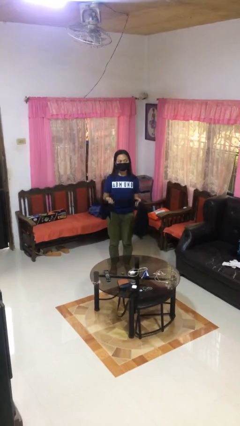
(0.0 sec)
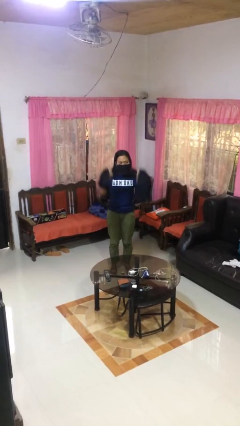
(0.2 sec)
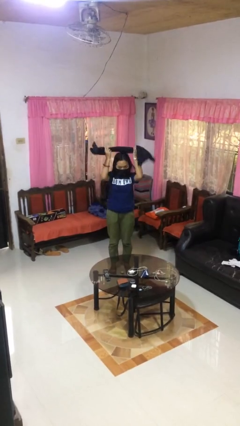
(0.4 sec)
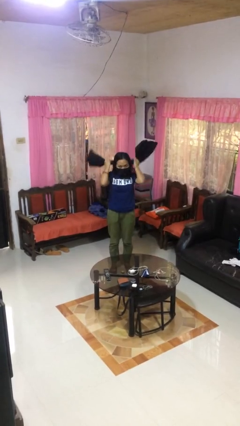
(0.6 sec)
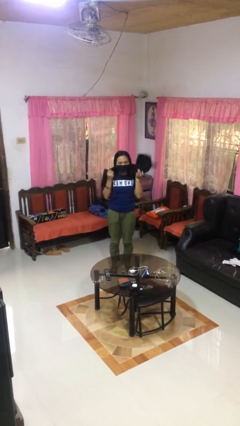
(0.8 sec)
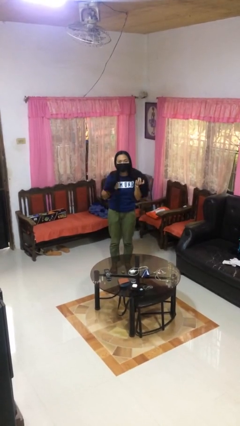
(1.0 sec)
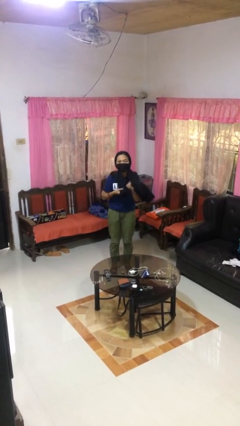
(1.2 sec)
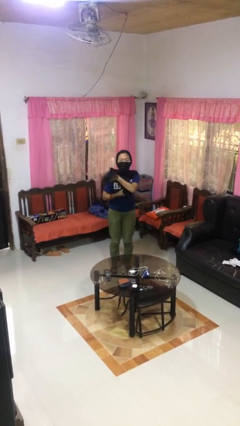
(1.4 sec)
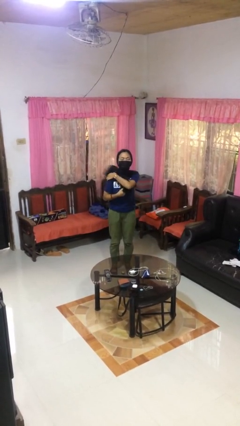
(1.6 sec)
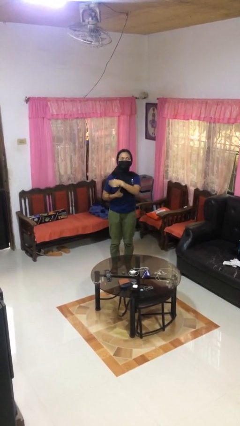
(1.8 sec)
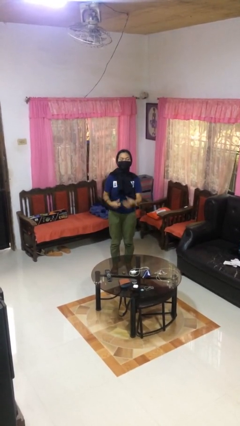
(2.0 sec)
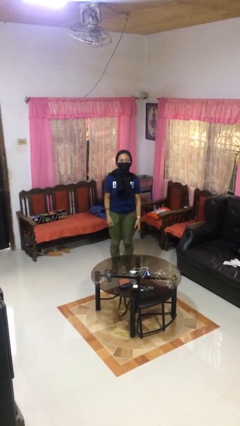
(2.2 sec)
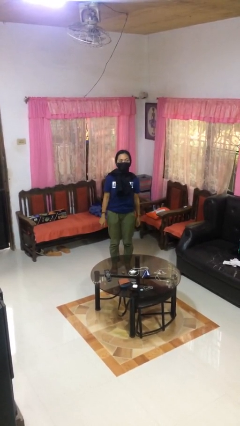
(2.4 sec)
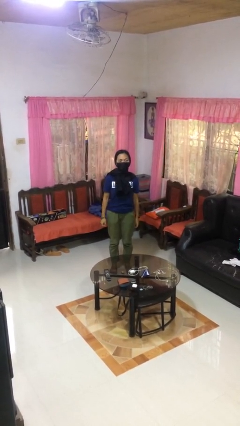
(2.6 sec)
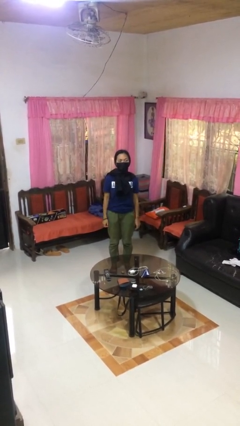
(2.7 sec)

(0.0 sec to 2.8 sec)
person puts on scarf

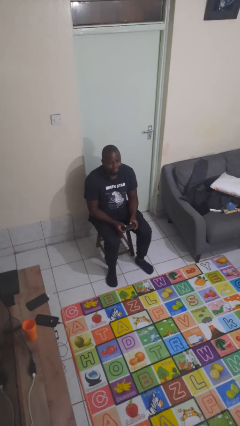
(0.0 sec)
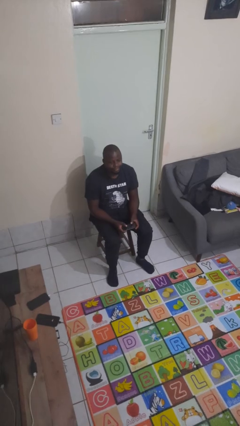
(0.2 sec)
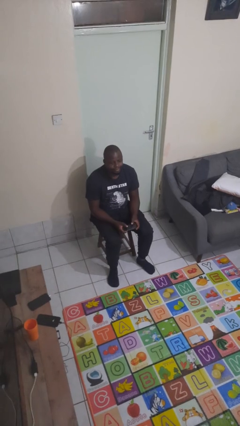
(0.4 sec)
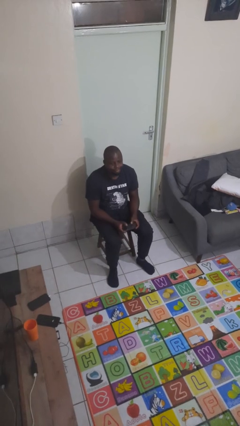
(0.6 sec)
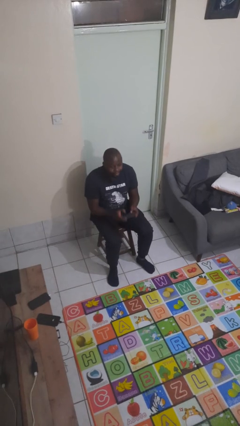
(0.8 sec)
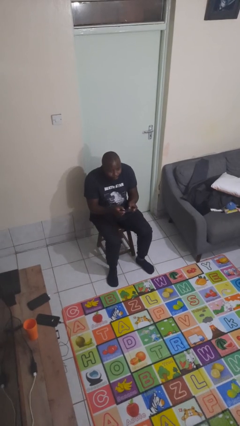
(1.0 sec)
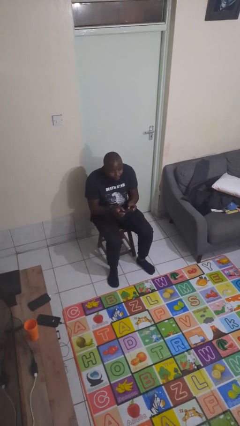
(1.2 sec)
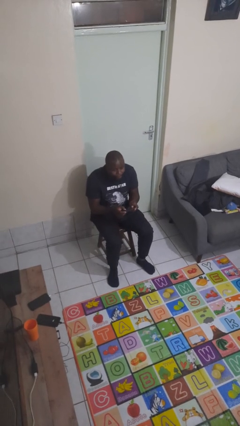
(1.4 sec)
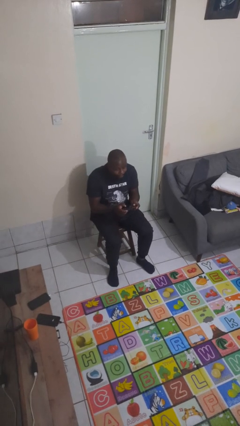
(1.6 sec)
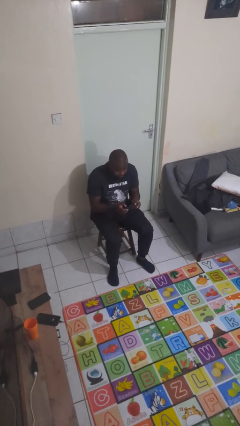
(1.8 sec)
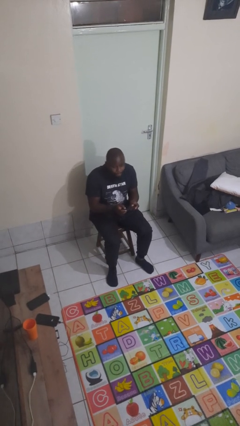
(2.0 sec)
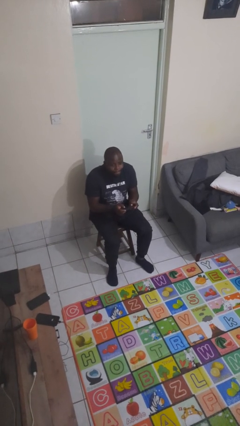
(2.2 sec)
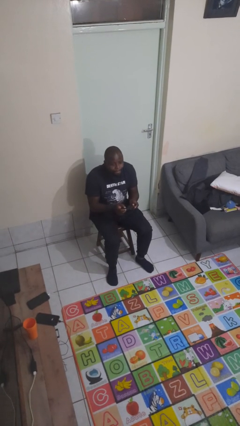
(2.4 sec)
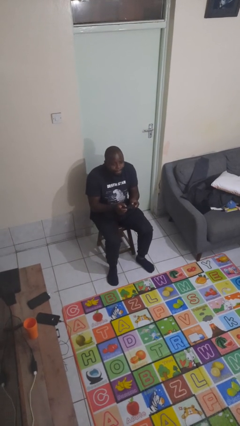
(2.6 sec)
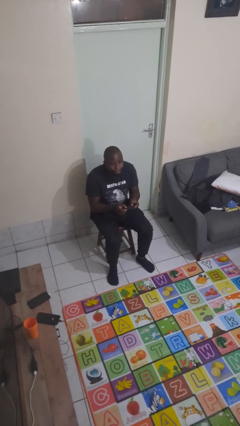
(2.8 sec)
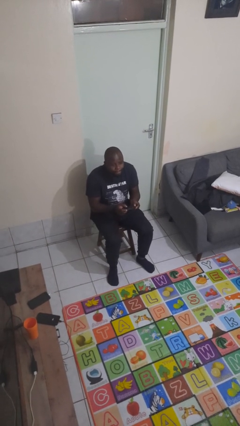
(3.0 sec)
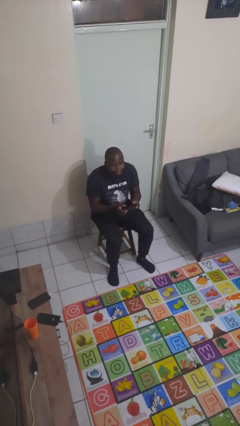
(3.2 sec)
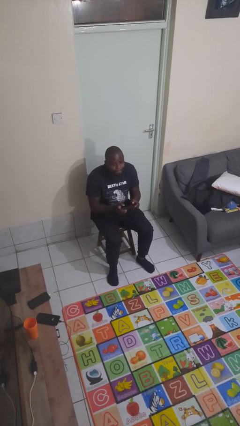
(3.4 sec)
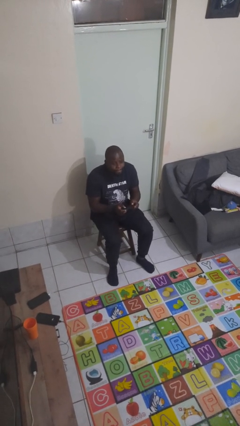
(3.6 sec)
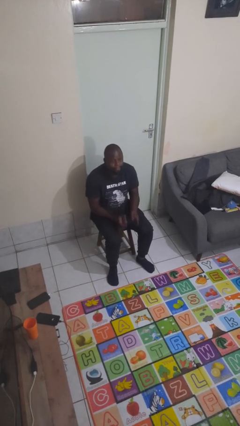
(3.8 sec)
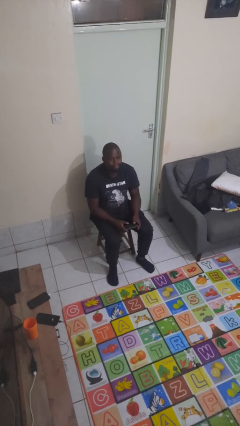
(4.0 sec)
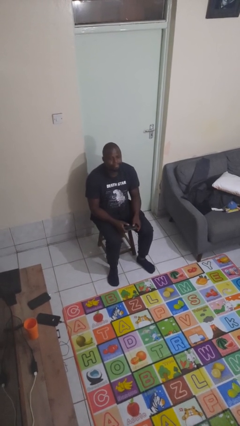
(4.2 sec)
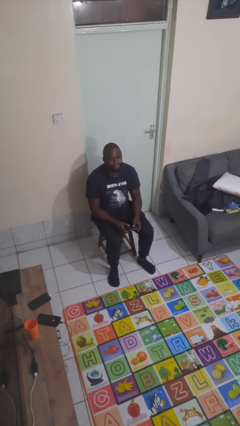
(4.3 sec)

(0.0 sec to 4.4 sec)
person interacts with handheld game

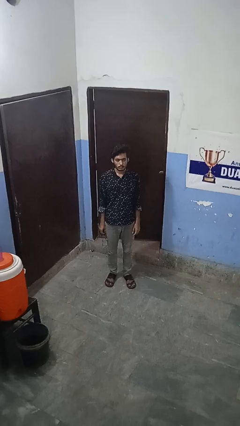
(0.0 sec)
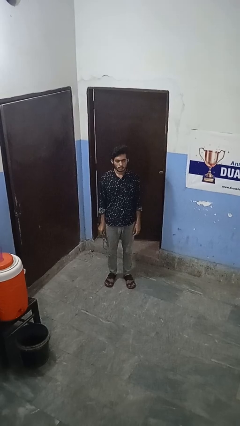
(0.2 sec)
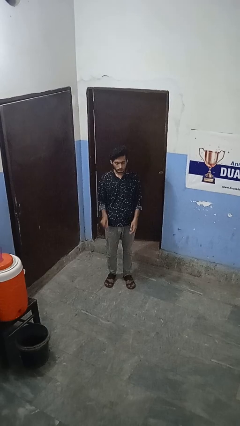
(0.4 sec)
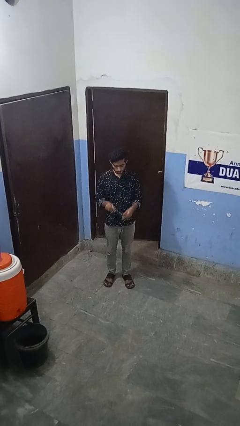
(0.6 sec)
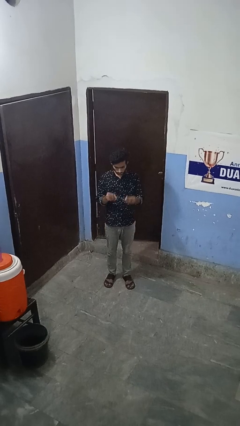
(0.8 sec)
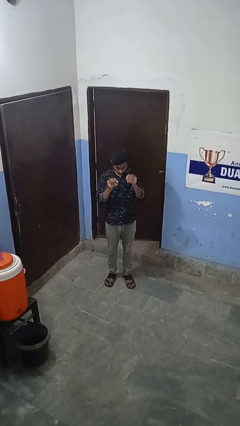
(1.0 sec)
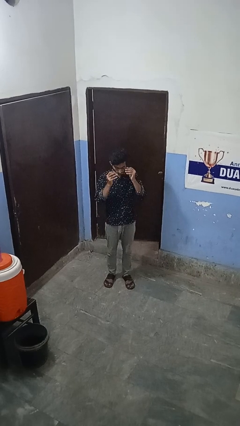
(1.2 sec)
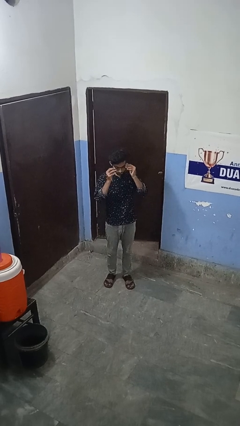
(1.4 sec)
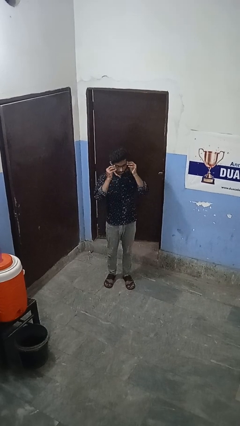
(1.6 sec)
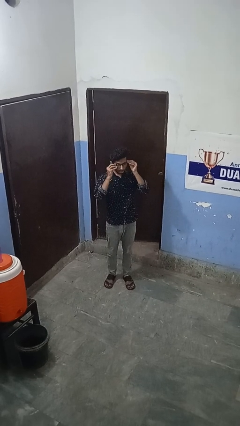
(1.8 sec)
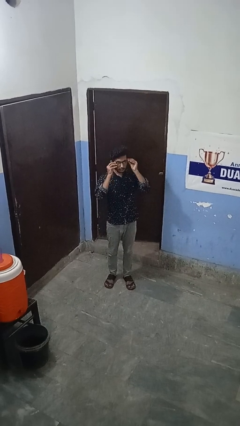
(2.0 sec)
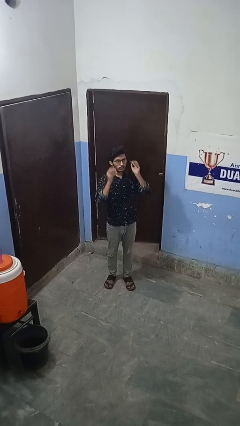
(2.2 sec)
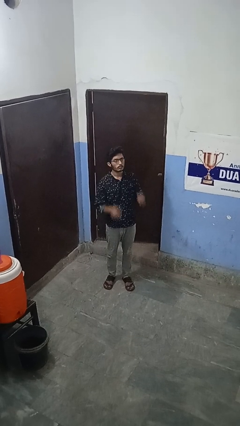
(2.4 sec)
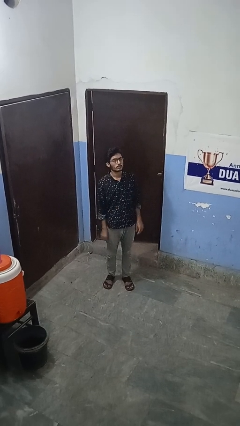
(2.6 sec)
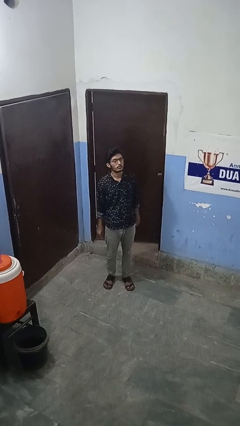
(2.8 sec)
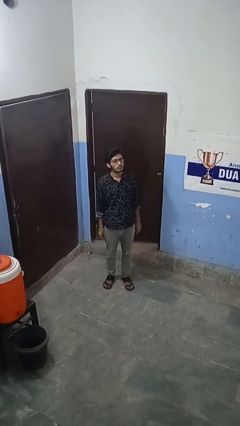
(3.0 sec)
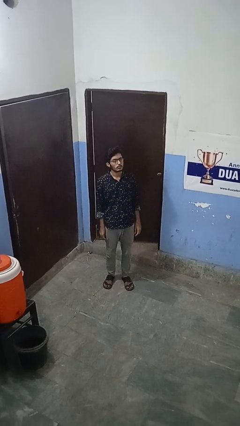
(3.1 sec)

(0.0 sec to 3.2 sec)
person puts on glasses

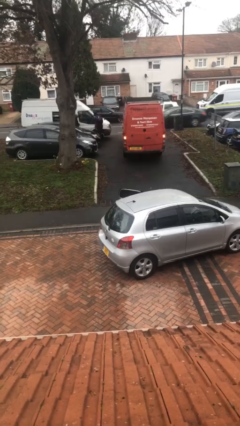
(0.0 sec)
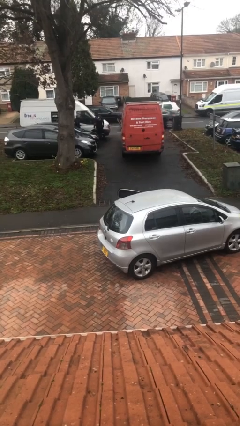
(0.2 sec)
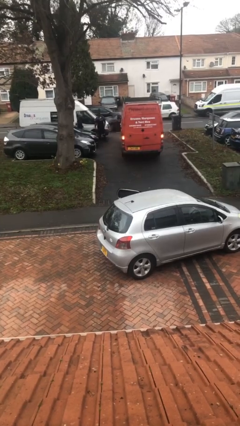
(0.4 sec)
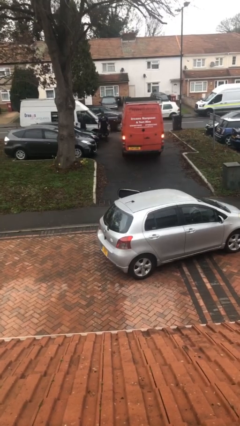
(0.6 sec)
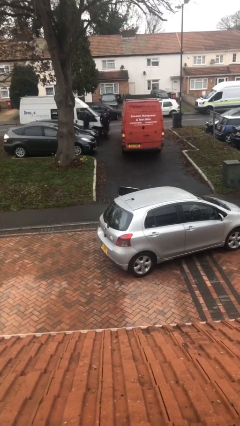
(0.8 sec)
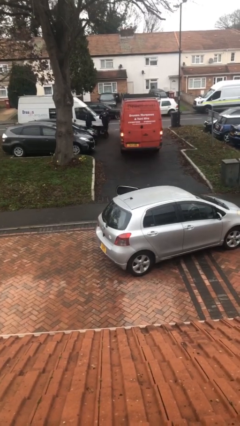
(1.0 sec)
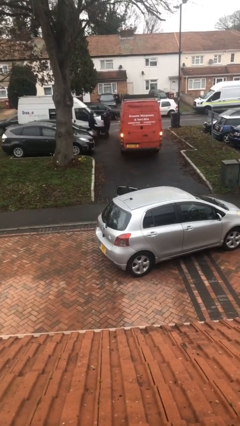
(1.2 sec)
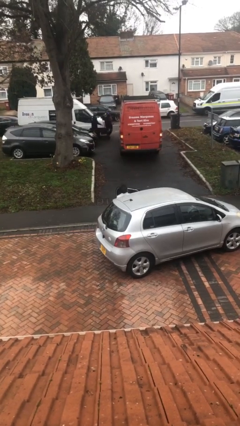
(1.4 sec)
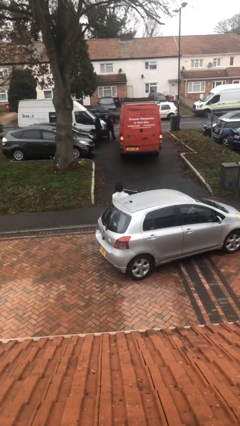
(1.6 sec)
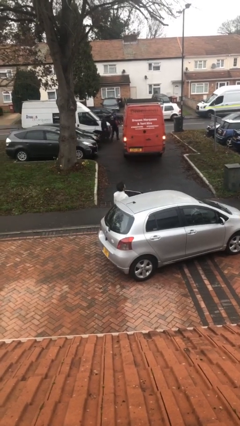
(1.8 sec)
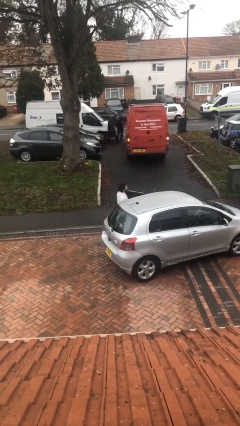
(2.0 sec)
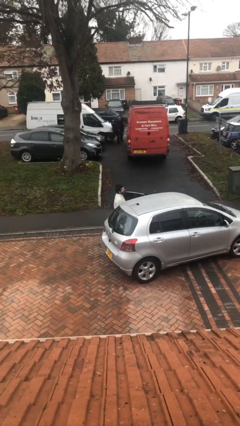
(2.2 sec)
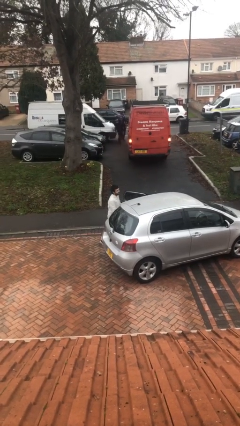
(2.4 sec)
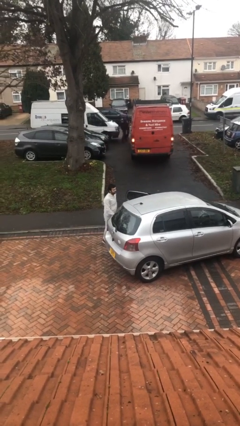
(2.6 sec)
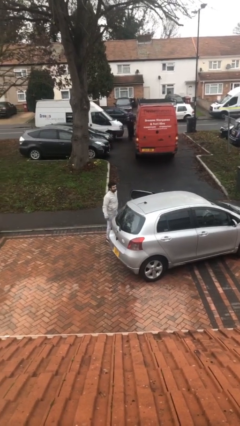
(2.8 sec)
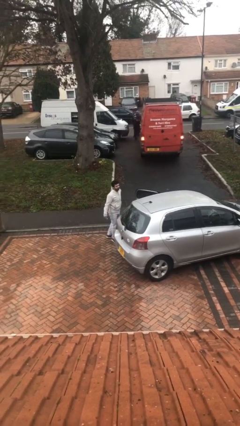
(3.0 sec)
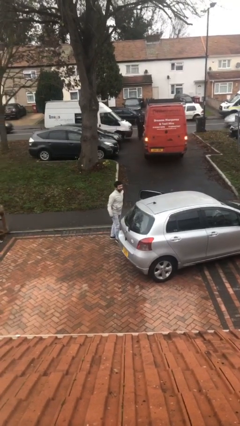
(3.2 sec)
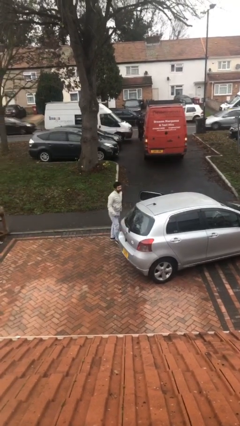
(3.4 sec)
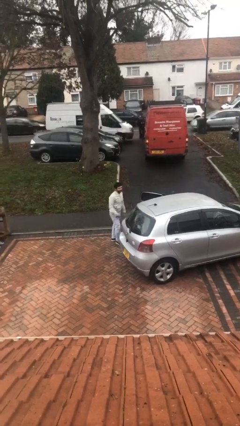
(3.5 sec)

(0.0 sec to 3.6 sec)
person exits car

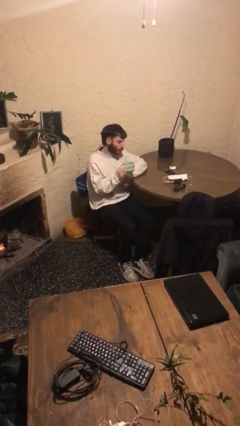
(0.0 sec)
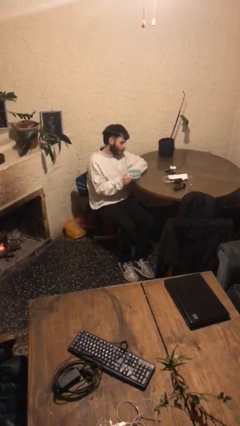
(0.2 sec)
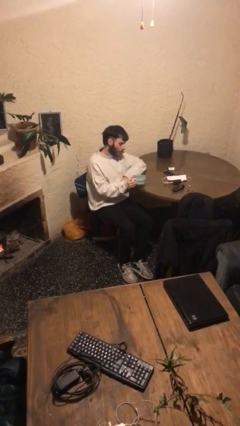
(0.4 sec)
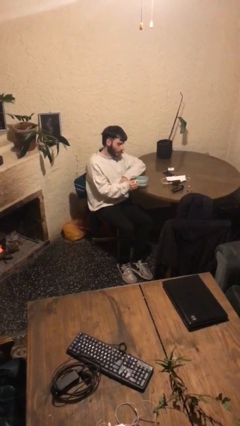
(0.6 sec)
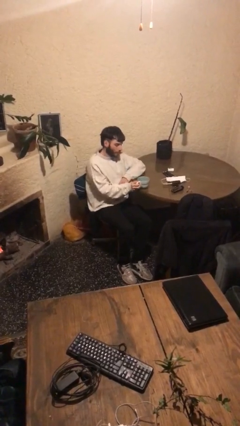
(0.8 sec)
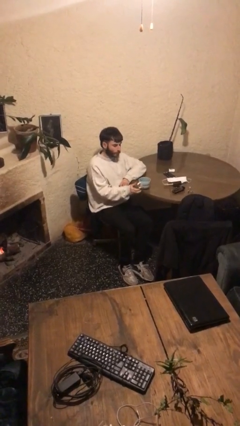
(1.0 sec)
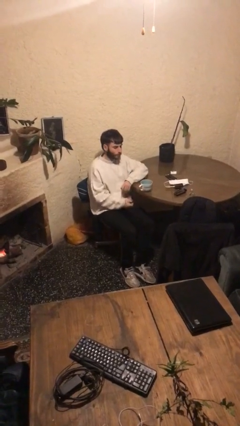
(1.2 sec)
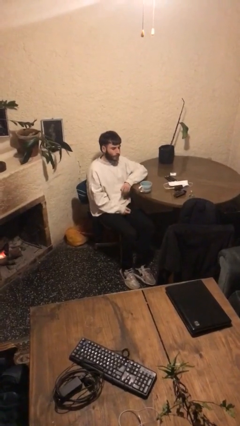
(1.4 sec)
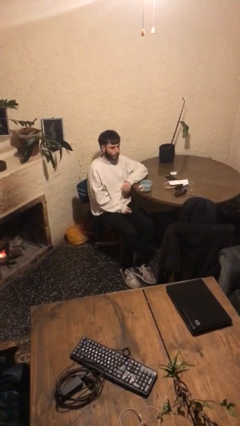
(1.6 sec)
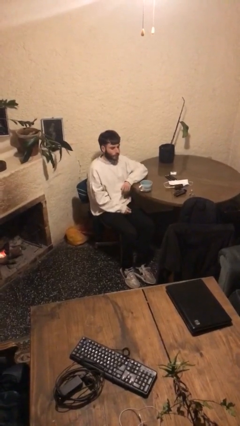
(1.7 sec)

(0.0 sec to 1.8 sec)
person puts down object on table

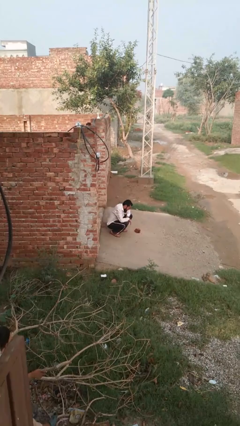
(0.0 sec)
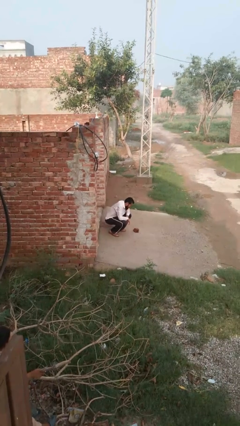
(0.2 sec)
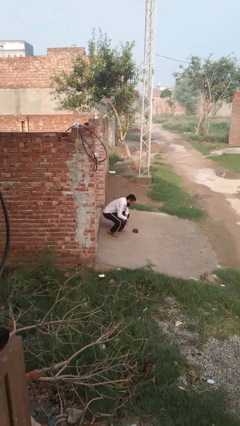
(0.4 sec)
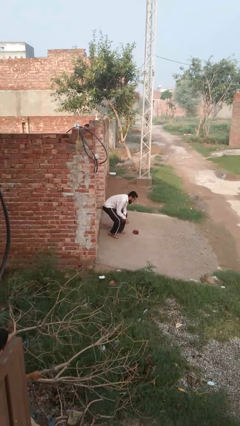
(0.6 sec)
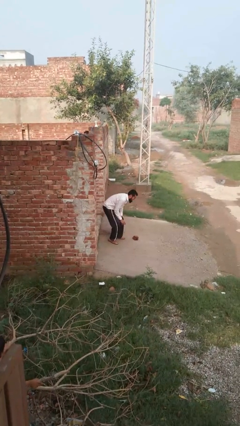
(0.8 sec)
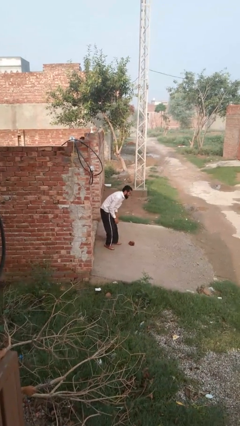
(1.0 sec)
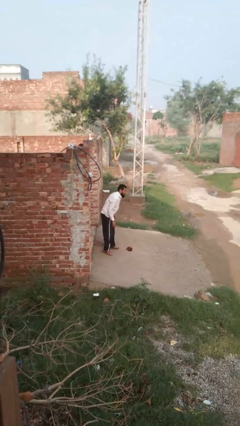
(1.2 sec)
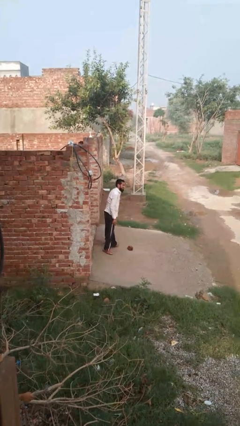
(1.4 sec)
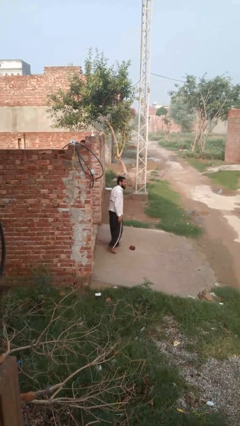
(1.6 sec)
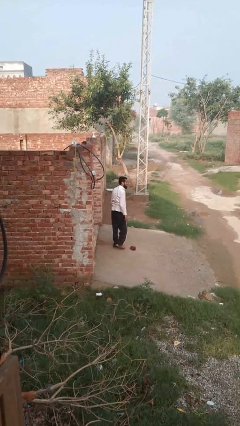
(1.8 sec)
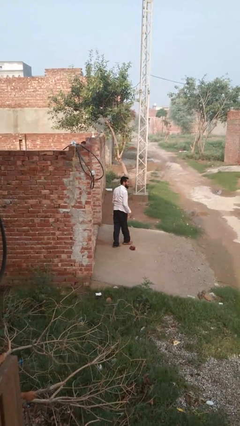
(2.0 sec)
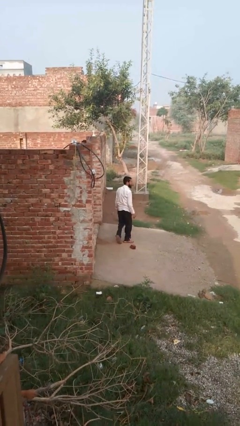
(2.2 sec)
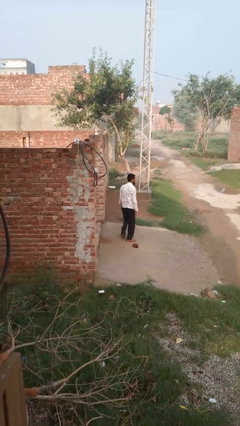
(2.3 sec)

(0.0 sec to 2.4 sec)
person stands up from floor
